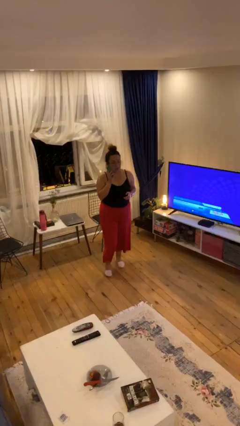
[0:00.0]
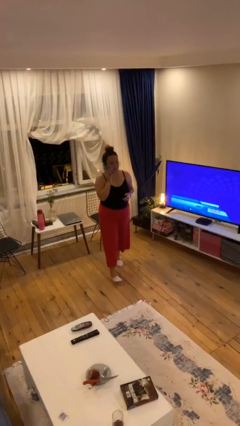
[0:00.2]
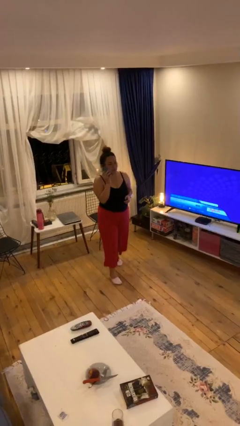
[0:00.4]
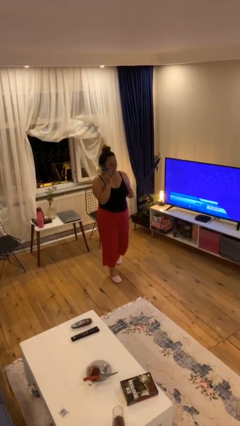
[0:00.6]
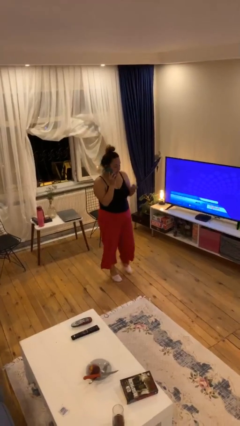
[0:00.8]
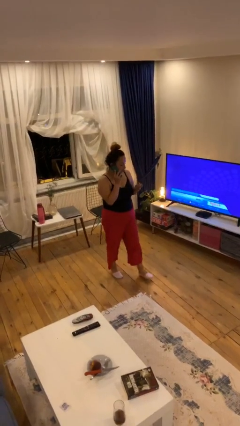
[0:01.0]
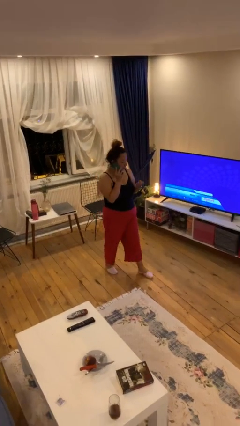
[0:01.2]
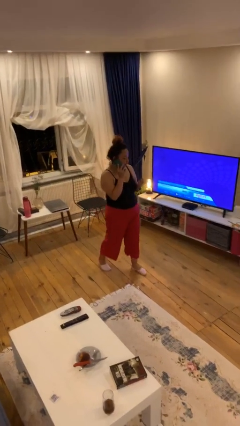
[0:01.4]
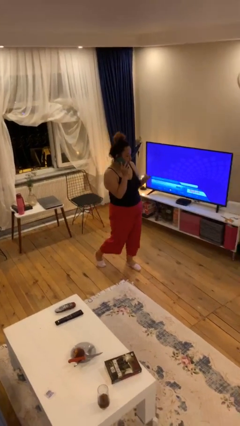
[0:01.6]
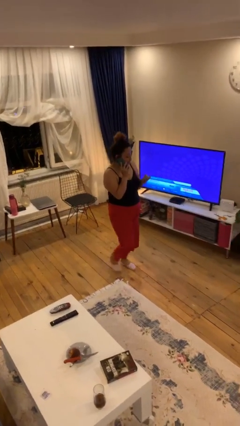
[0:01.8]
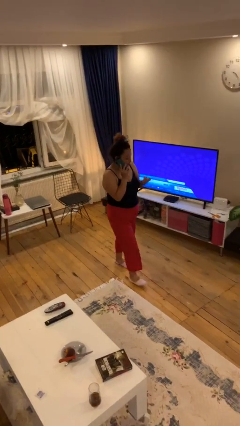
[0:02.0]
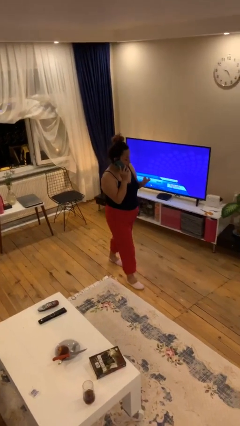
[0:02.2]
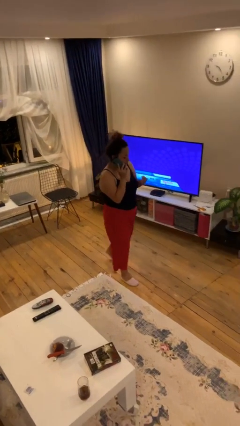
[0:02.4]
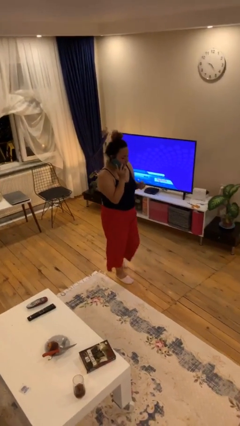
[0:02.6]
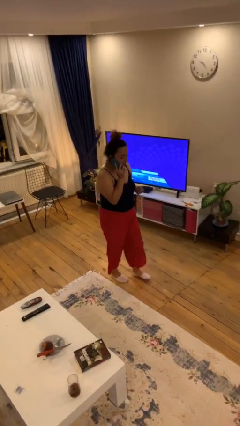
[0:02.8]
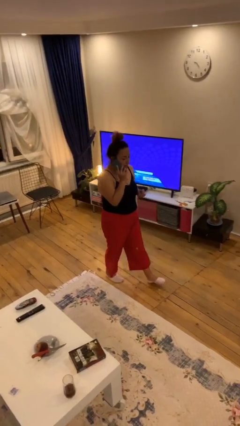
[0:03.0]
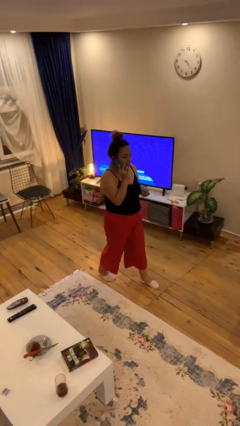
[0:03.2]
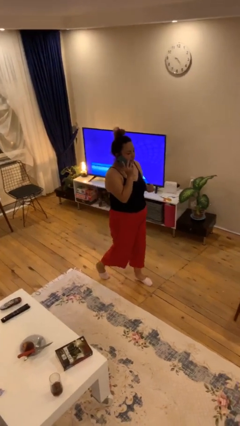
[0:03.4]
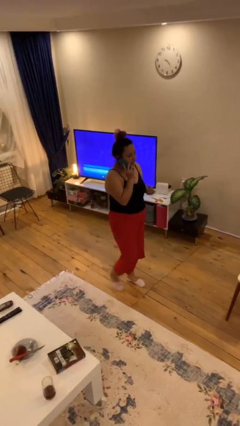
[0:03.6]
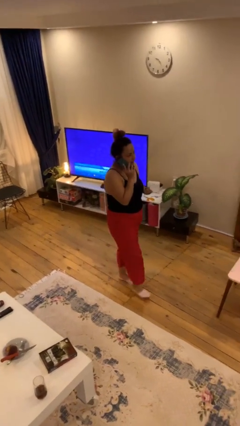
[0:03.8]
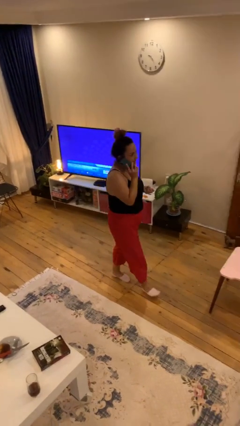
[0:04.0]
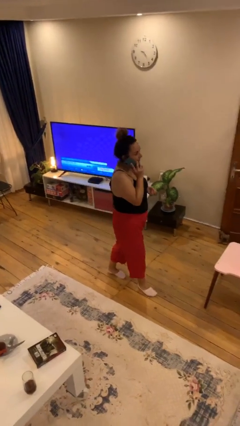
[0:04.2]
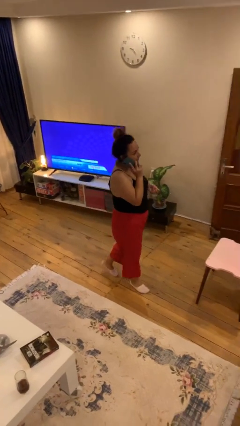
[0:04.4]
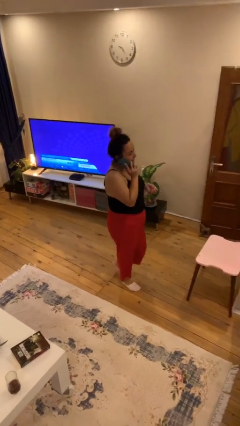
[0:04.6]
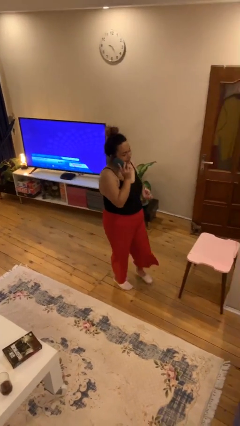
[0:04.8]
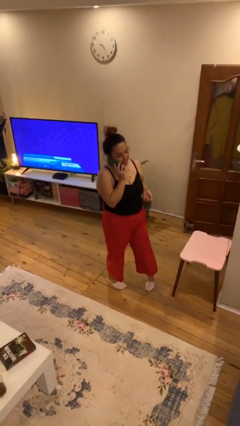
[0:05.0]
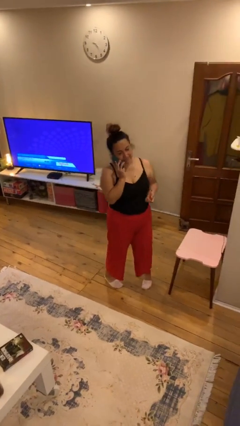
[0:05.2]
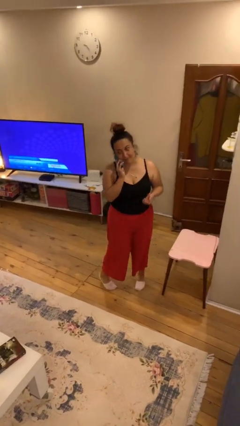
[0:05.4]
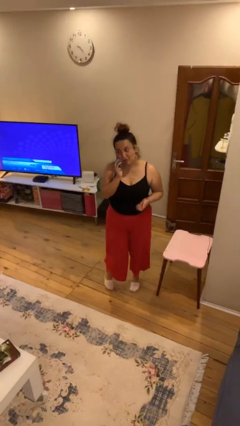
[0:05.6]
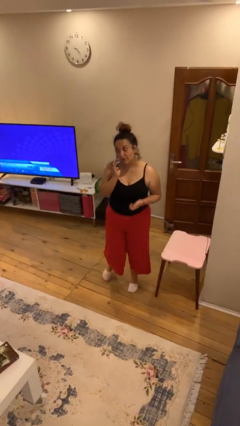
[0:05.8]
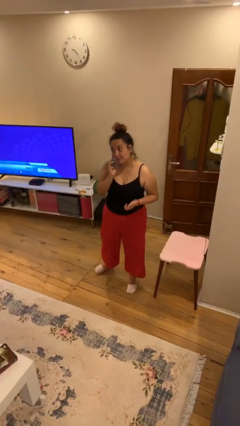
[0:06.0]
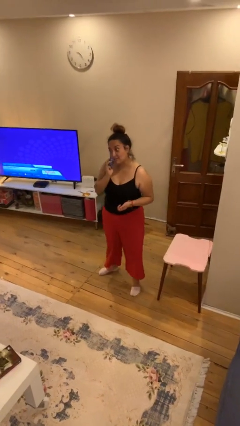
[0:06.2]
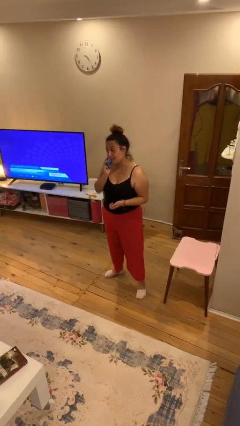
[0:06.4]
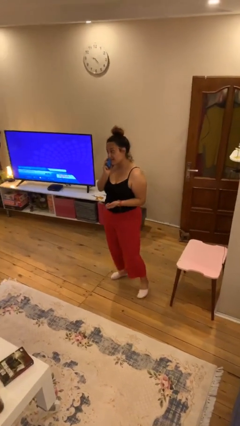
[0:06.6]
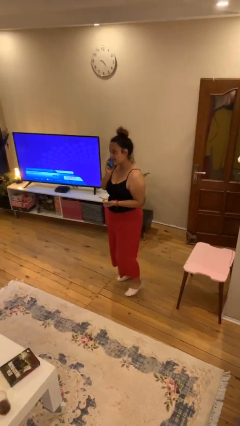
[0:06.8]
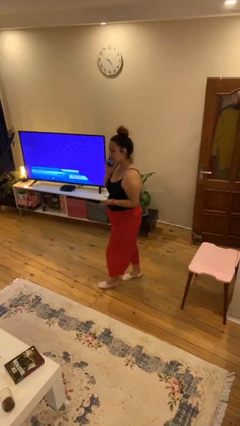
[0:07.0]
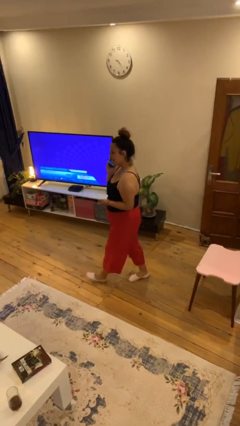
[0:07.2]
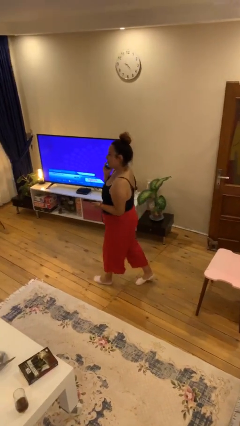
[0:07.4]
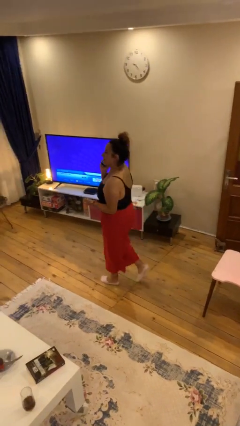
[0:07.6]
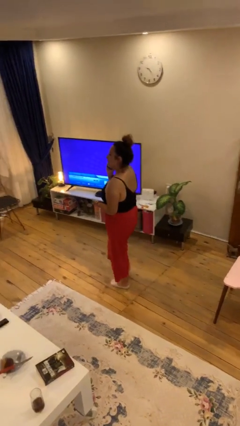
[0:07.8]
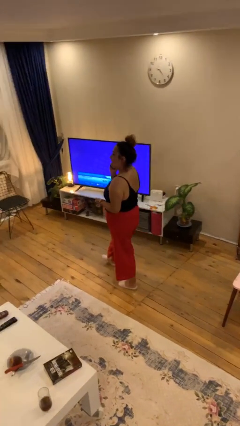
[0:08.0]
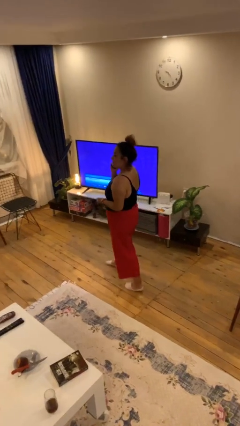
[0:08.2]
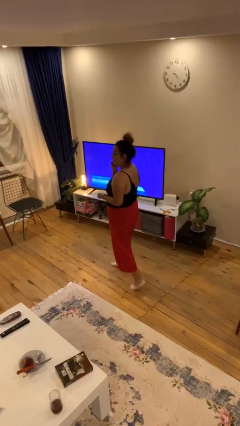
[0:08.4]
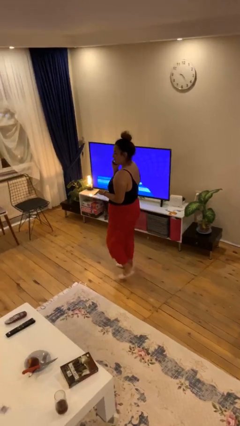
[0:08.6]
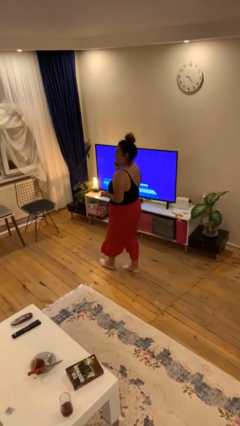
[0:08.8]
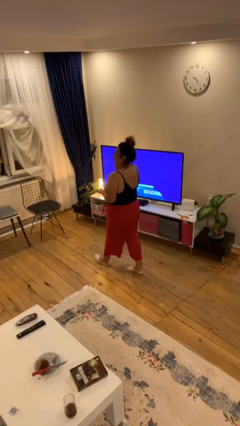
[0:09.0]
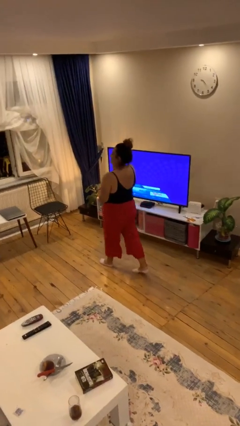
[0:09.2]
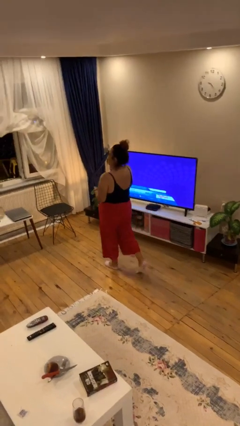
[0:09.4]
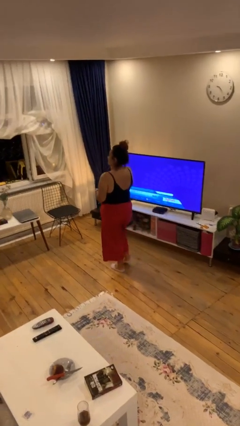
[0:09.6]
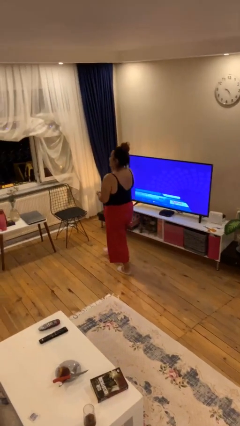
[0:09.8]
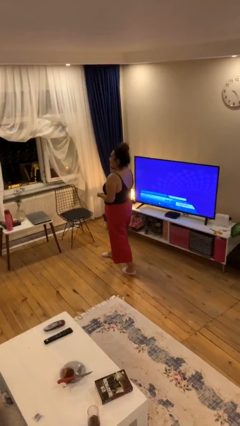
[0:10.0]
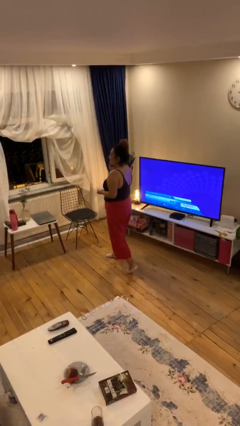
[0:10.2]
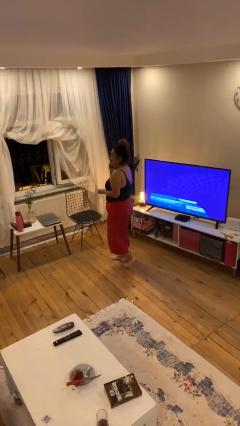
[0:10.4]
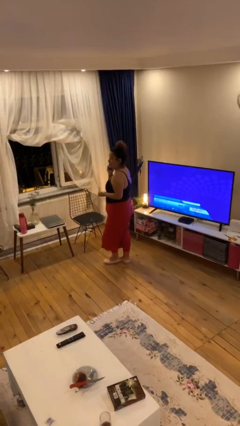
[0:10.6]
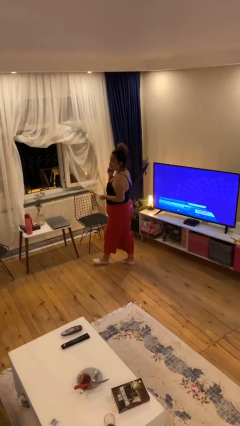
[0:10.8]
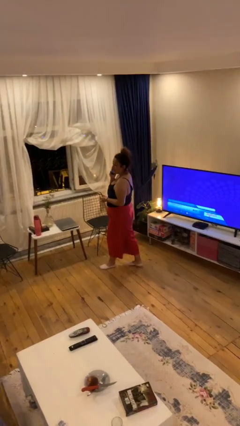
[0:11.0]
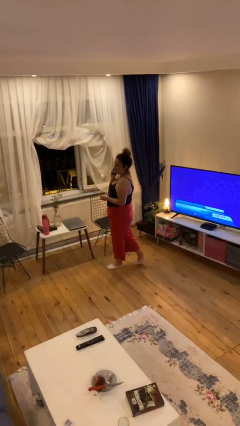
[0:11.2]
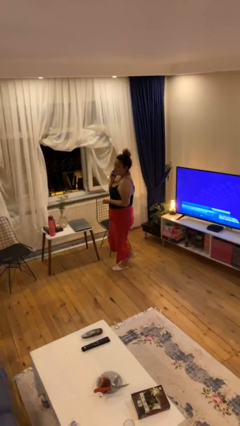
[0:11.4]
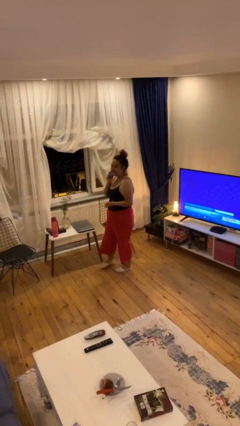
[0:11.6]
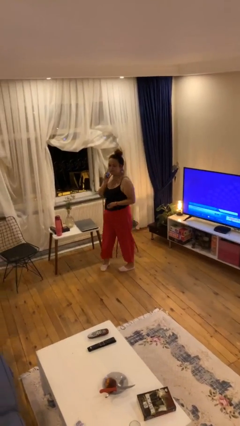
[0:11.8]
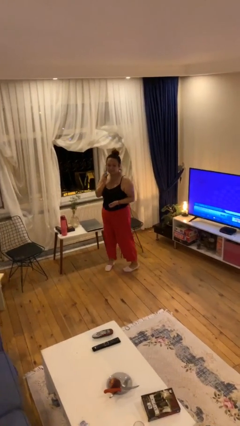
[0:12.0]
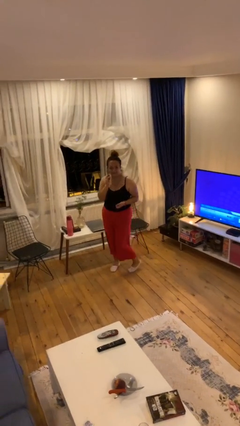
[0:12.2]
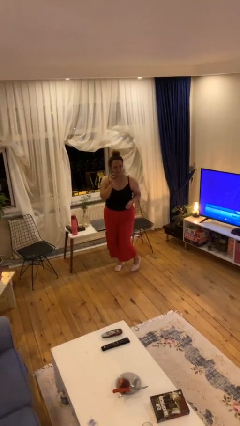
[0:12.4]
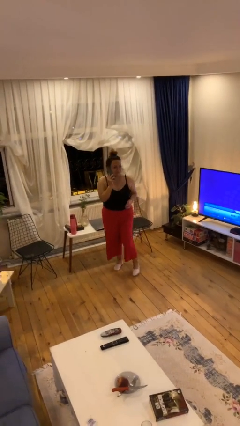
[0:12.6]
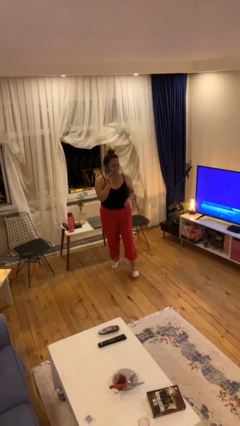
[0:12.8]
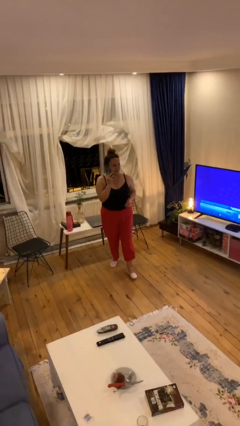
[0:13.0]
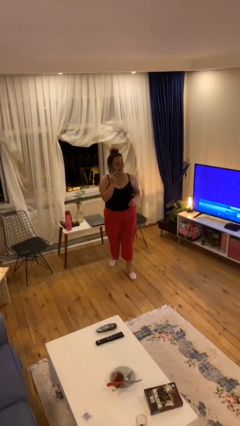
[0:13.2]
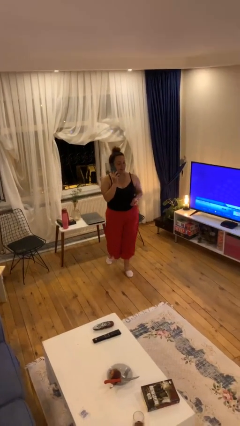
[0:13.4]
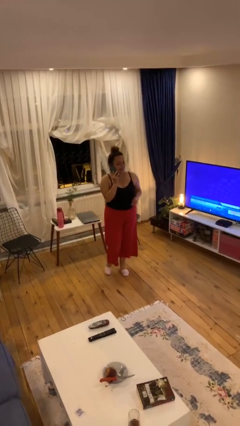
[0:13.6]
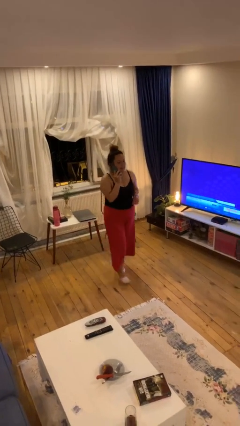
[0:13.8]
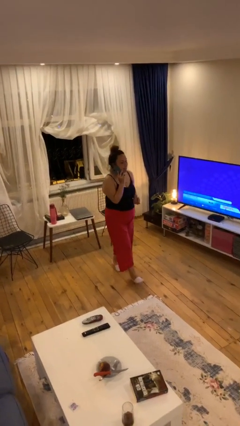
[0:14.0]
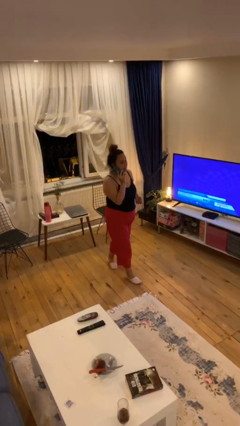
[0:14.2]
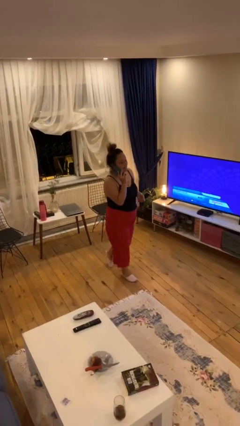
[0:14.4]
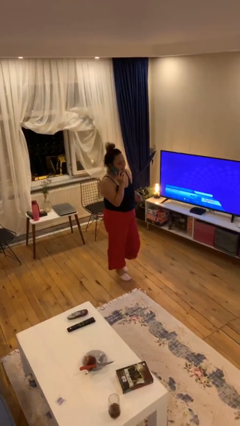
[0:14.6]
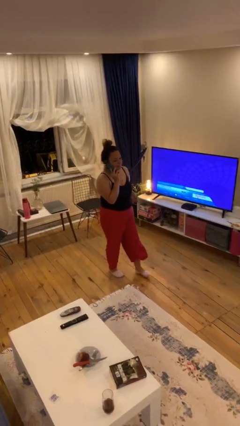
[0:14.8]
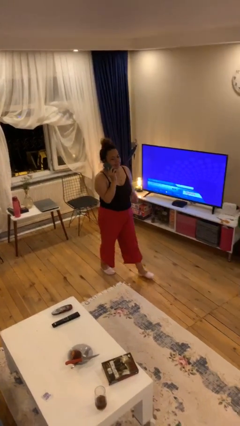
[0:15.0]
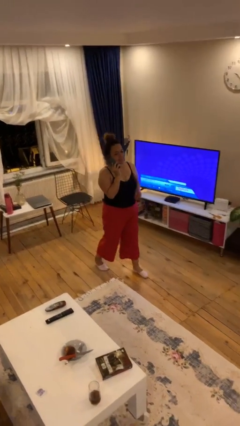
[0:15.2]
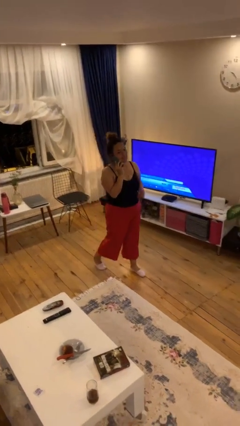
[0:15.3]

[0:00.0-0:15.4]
person talks on phone

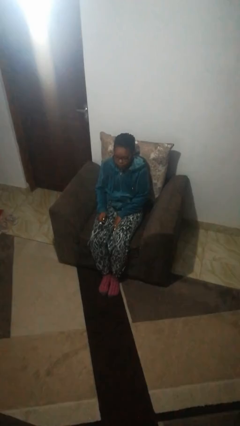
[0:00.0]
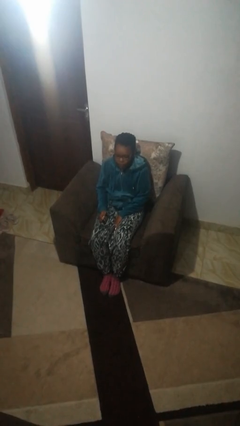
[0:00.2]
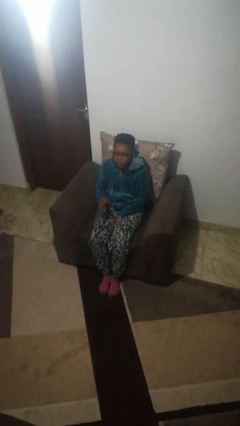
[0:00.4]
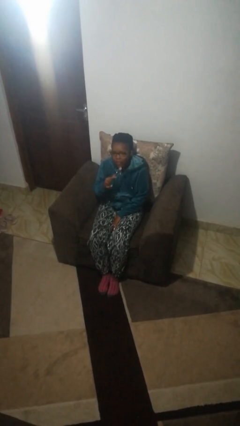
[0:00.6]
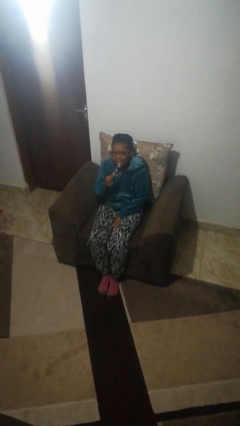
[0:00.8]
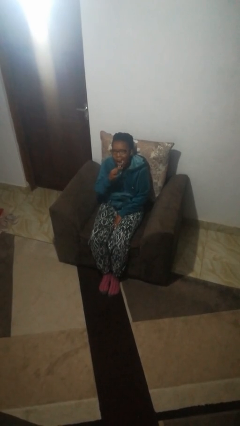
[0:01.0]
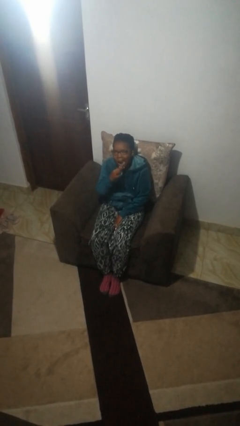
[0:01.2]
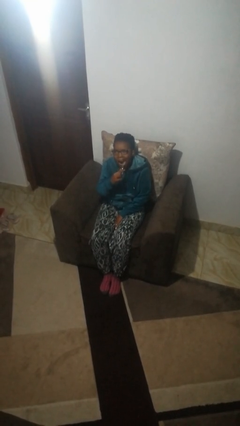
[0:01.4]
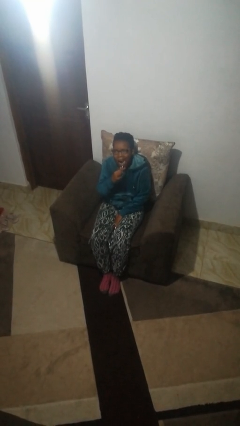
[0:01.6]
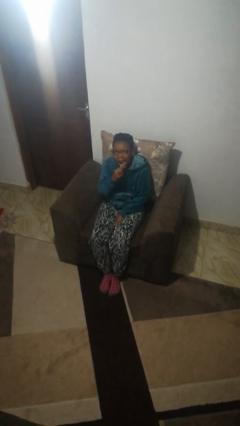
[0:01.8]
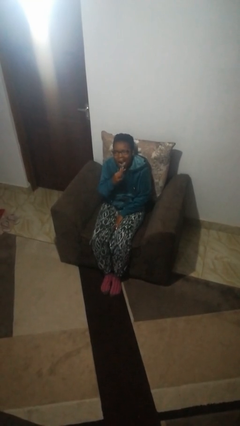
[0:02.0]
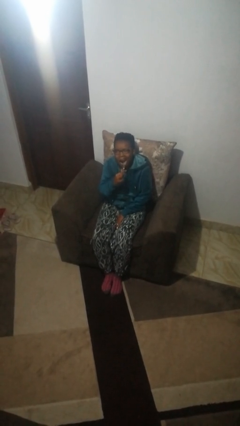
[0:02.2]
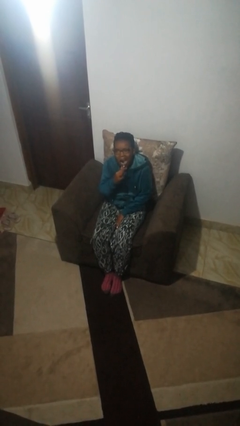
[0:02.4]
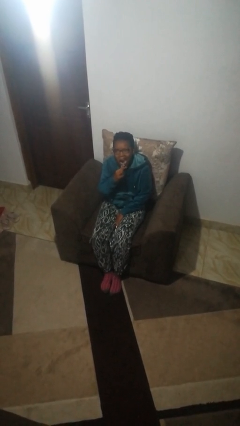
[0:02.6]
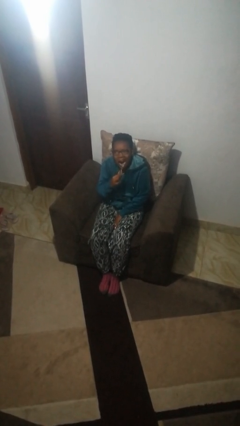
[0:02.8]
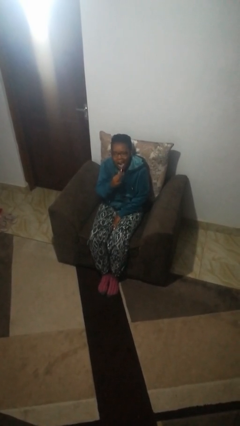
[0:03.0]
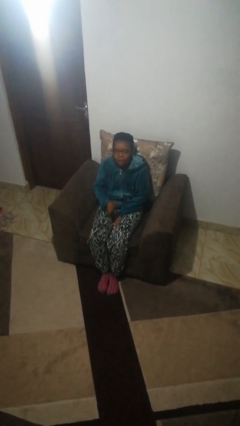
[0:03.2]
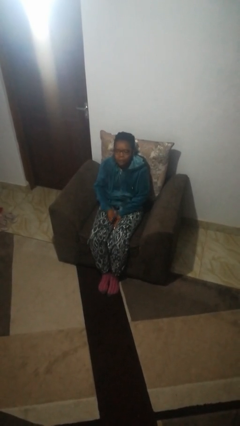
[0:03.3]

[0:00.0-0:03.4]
person brushes teeth
